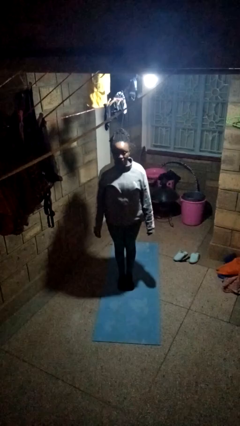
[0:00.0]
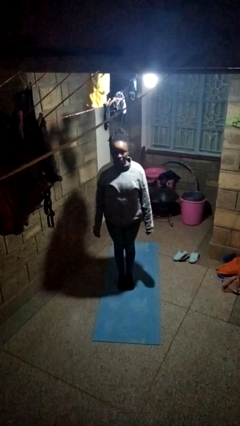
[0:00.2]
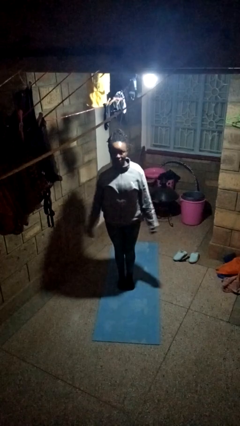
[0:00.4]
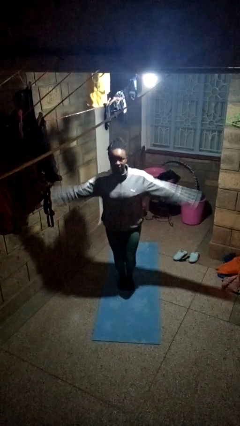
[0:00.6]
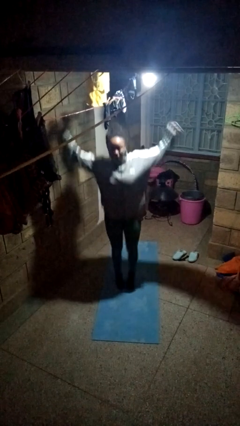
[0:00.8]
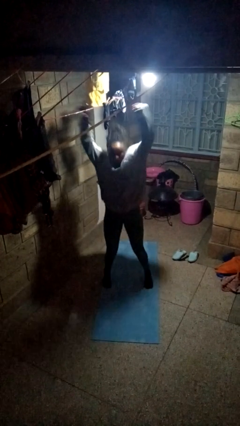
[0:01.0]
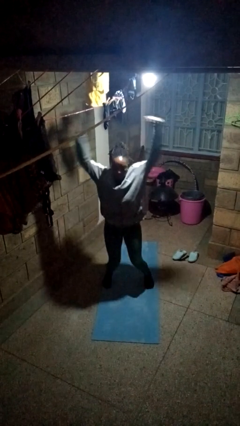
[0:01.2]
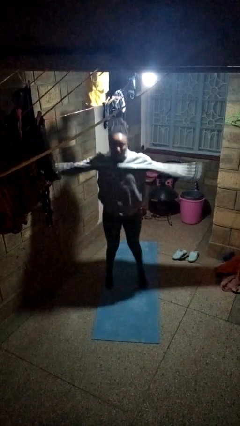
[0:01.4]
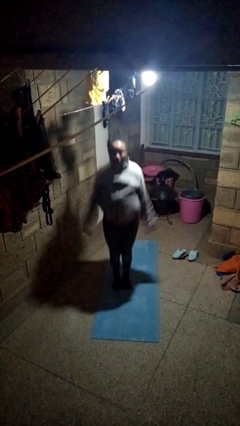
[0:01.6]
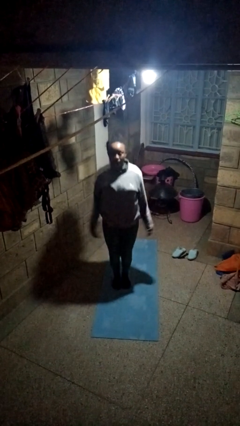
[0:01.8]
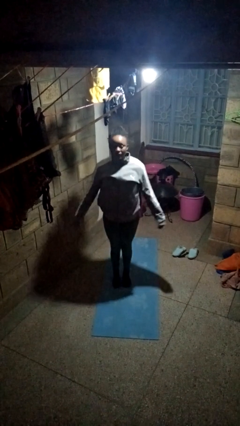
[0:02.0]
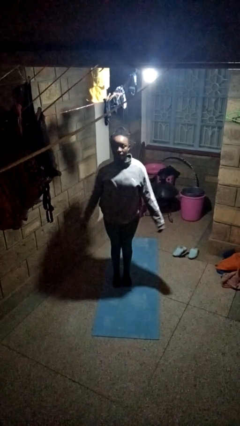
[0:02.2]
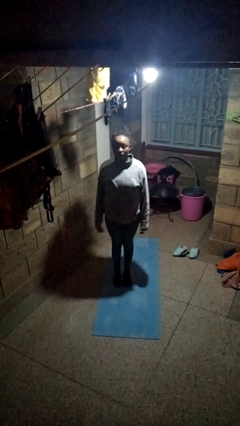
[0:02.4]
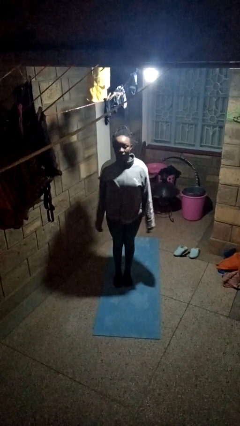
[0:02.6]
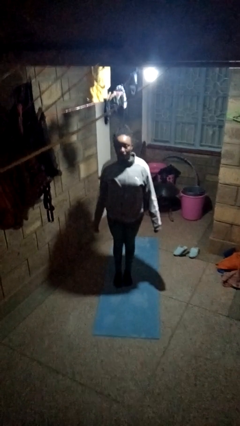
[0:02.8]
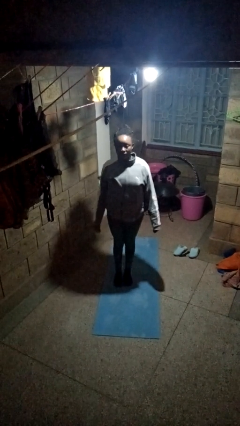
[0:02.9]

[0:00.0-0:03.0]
person exercises with jumping jacks

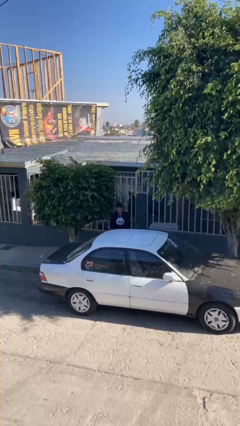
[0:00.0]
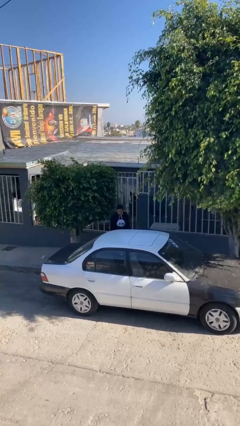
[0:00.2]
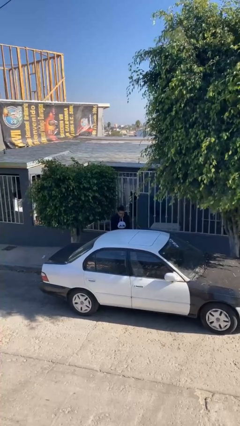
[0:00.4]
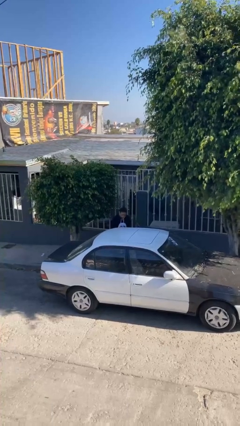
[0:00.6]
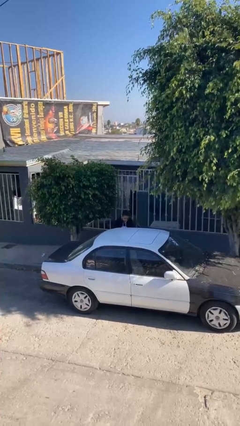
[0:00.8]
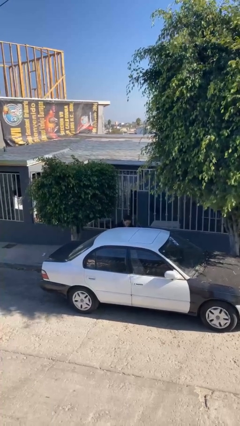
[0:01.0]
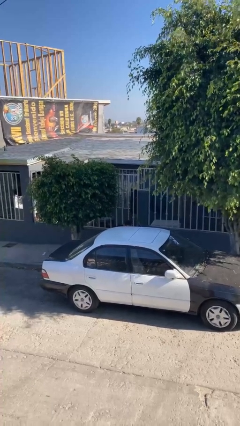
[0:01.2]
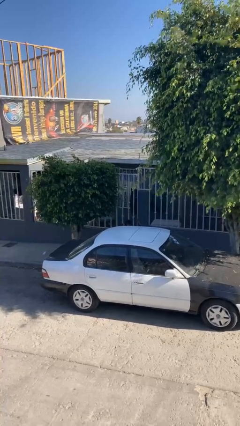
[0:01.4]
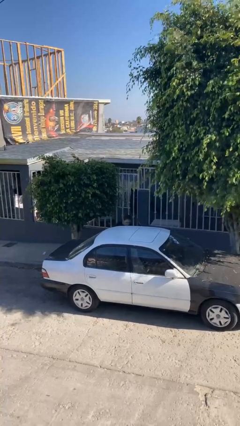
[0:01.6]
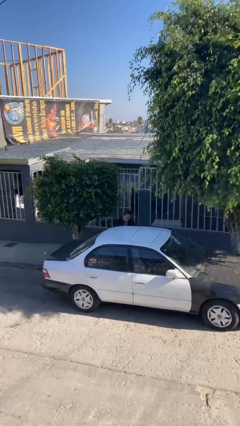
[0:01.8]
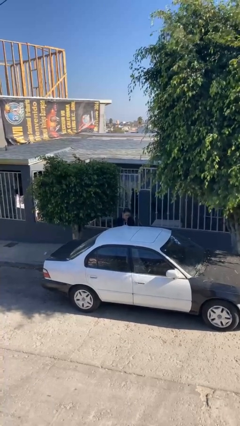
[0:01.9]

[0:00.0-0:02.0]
person unloads car

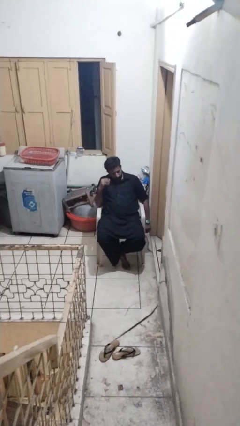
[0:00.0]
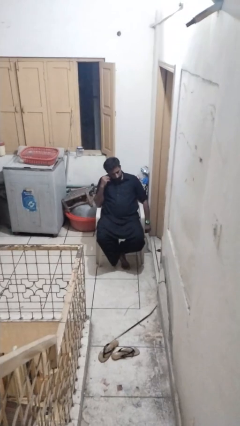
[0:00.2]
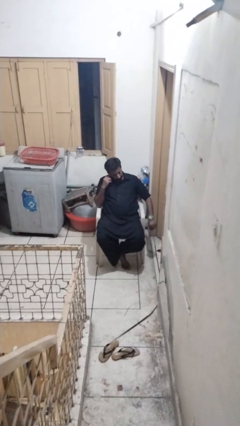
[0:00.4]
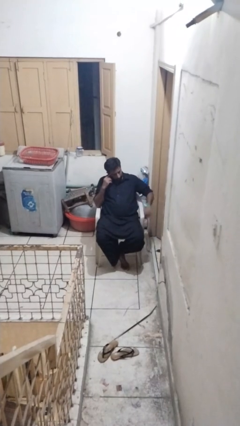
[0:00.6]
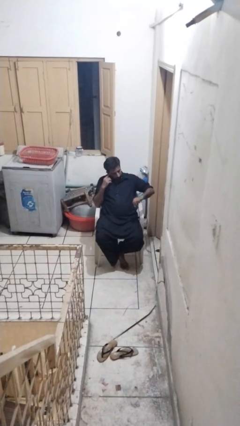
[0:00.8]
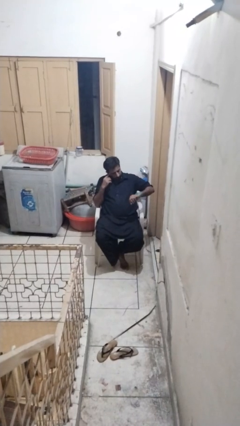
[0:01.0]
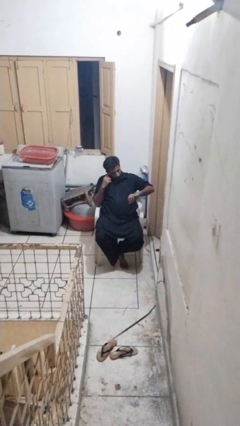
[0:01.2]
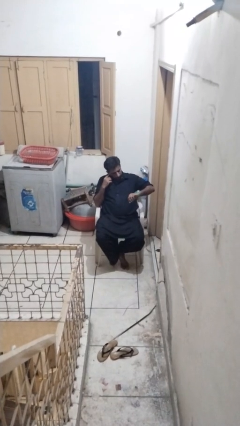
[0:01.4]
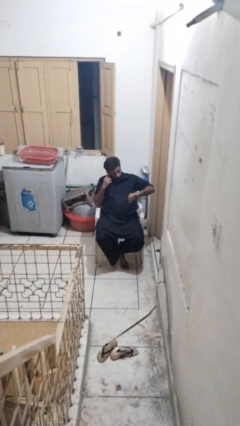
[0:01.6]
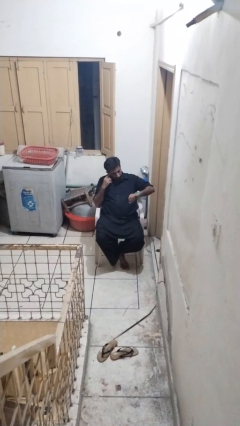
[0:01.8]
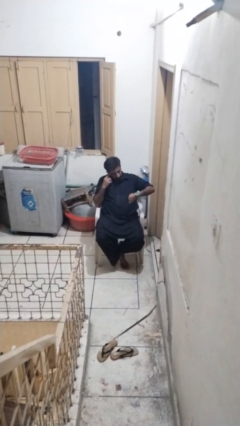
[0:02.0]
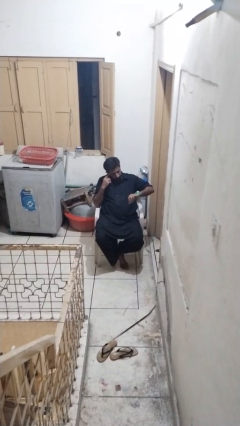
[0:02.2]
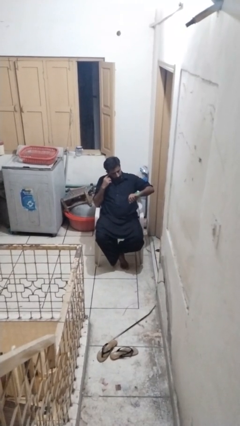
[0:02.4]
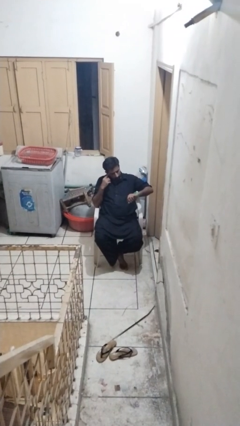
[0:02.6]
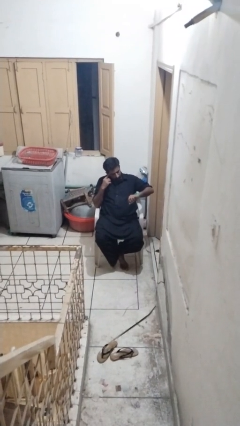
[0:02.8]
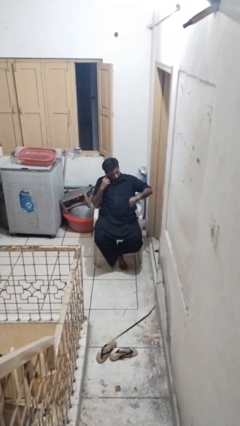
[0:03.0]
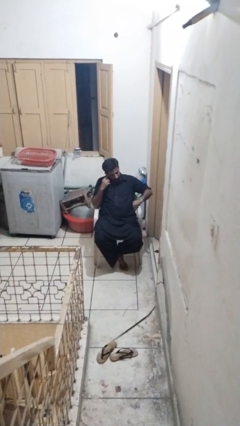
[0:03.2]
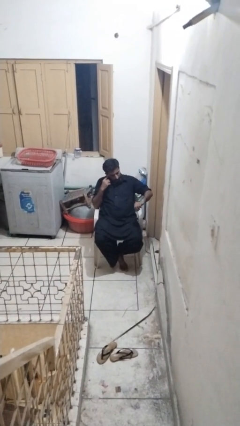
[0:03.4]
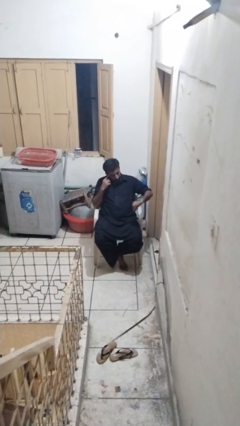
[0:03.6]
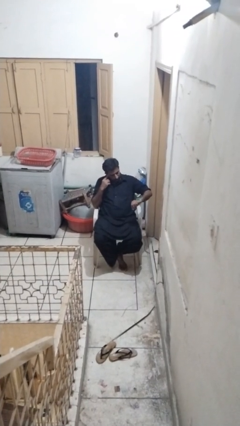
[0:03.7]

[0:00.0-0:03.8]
person looks at wristwatch

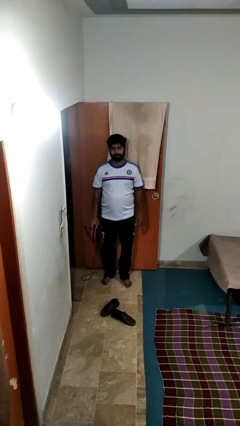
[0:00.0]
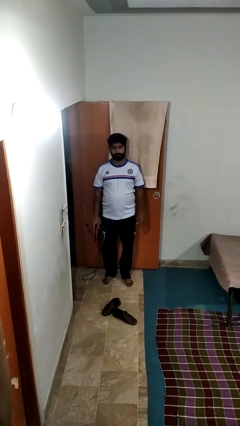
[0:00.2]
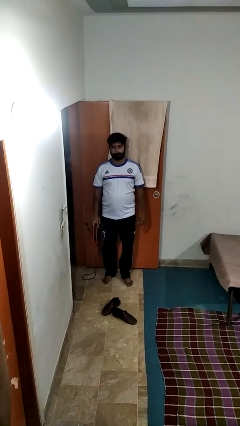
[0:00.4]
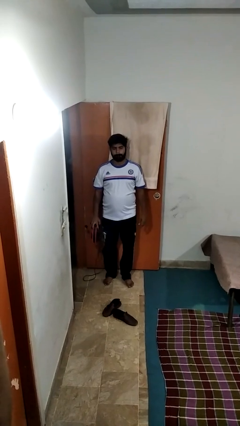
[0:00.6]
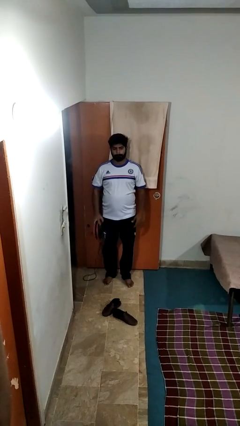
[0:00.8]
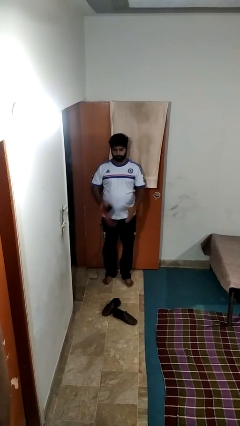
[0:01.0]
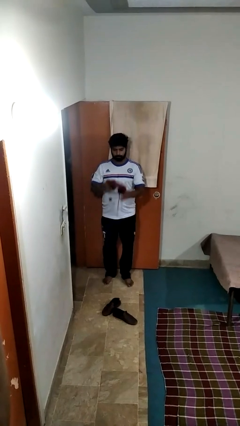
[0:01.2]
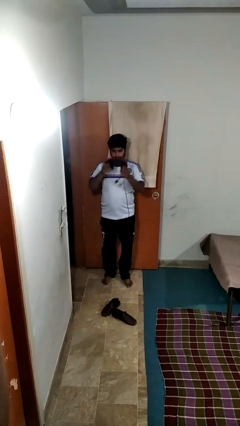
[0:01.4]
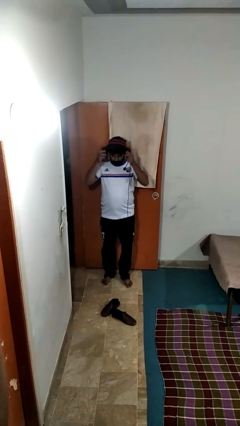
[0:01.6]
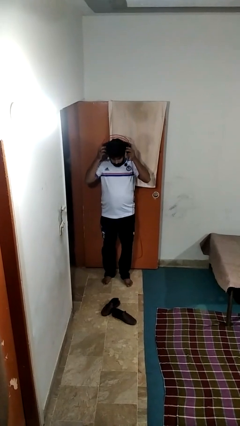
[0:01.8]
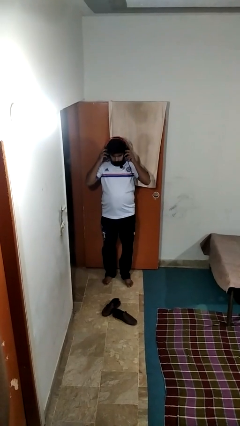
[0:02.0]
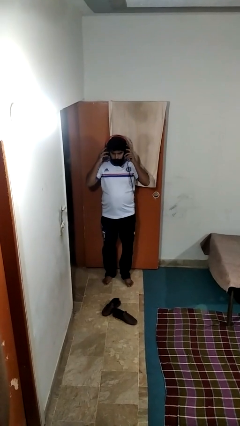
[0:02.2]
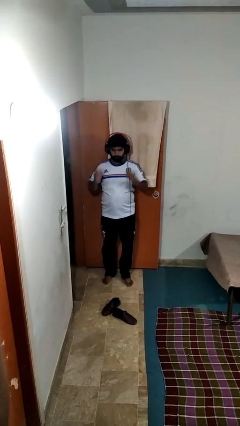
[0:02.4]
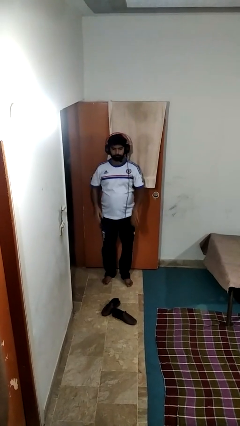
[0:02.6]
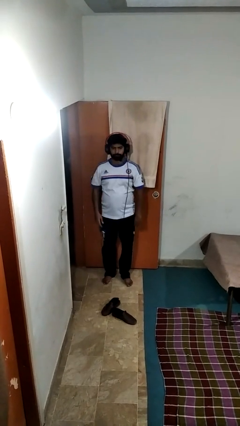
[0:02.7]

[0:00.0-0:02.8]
person puts on headphones

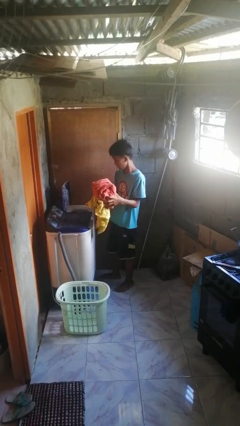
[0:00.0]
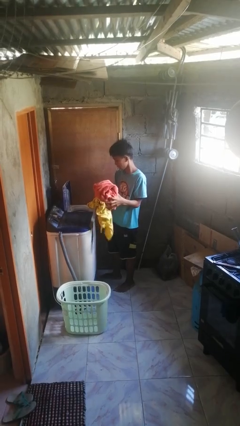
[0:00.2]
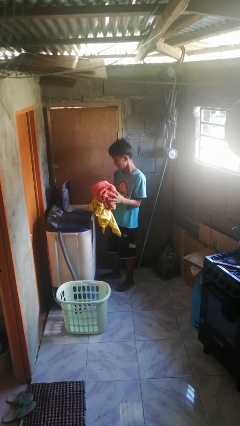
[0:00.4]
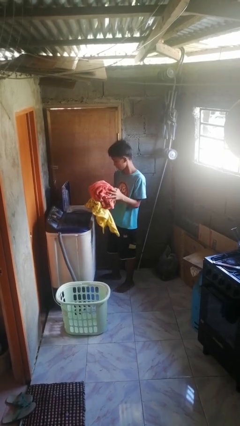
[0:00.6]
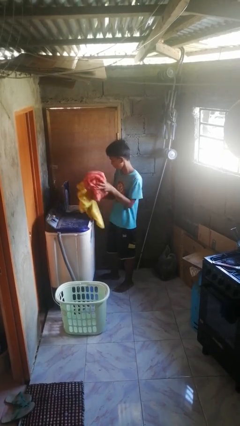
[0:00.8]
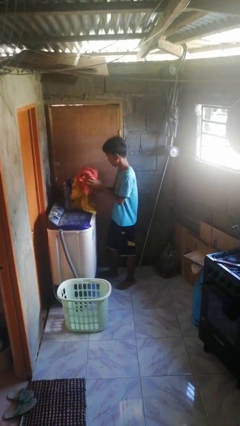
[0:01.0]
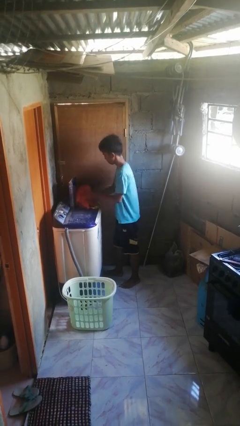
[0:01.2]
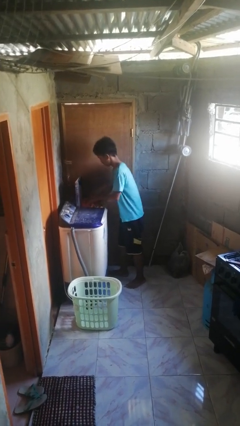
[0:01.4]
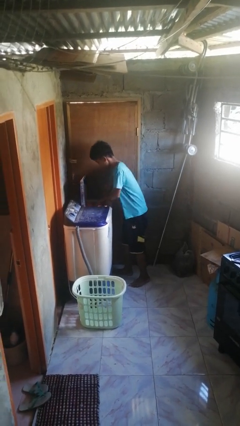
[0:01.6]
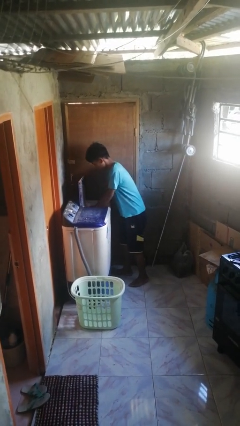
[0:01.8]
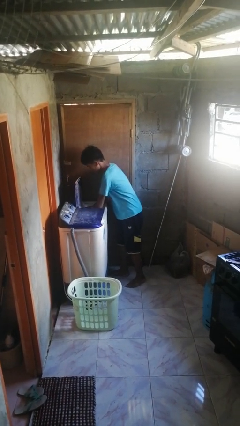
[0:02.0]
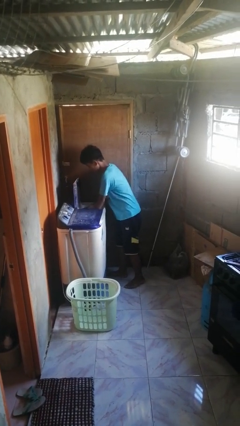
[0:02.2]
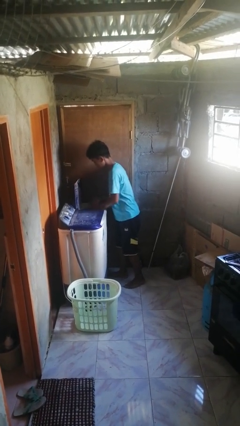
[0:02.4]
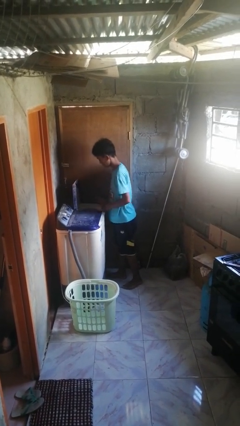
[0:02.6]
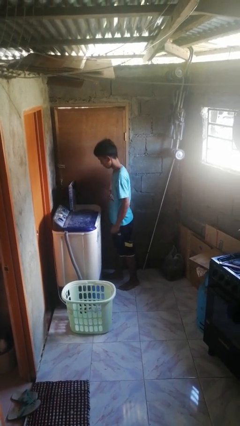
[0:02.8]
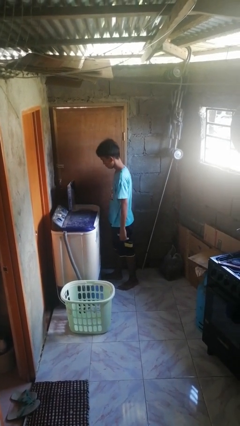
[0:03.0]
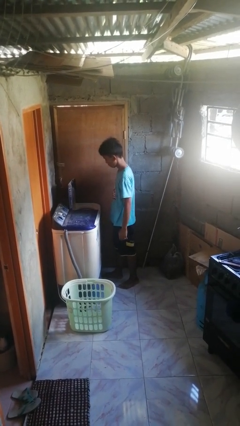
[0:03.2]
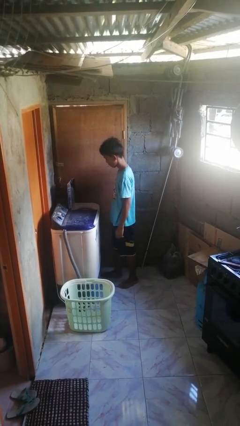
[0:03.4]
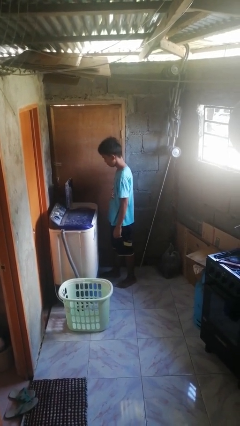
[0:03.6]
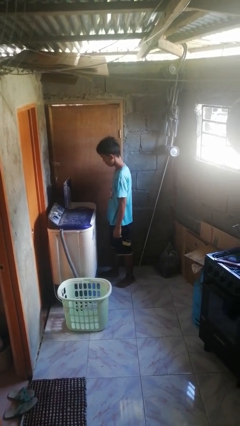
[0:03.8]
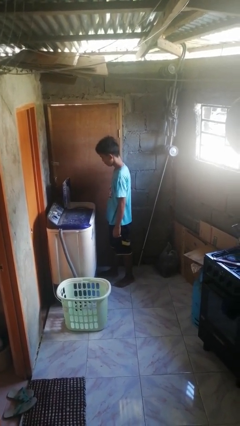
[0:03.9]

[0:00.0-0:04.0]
person loads dryer

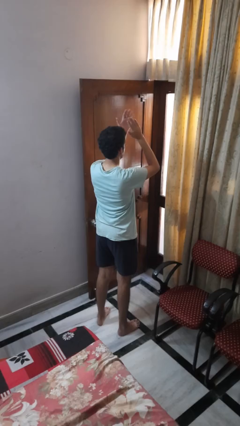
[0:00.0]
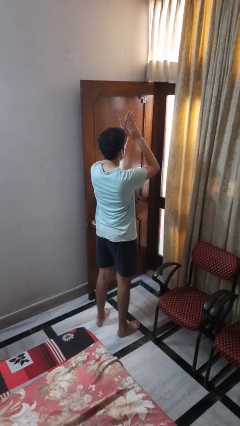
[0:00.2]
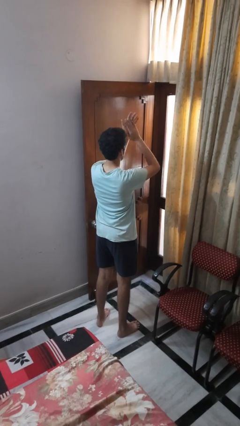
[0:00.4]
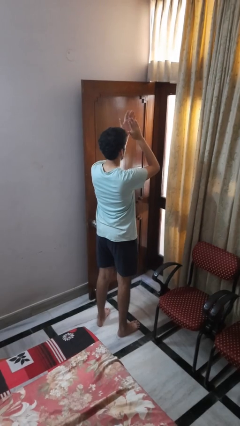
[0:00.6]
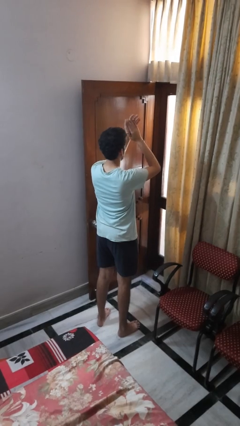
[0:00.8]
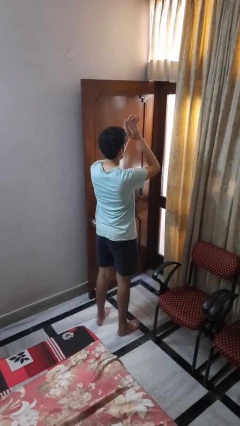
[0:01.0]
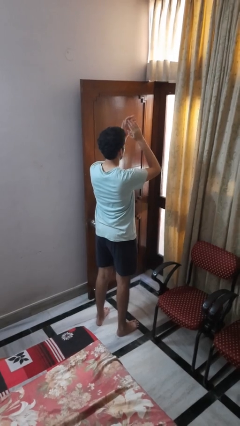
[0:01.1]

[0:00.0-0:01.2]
person claps hands

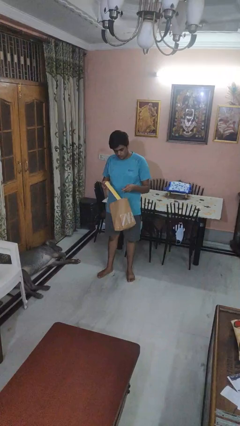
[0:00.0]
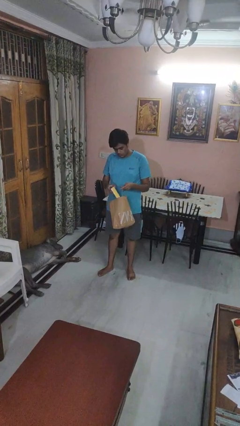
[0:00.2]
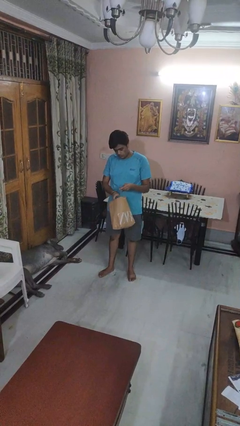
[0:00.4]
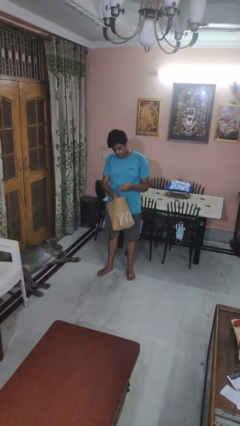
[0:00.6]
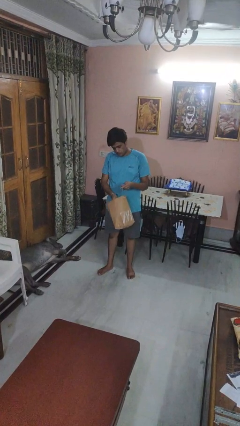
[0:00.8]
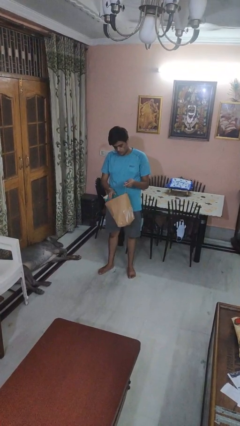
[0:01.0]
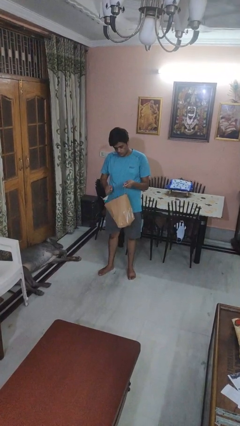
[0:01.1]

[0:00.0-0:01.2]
person puts object into bag
